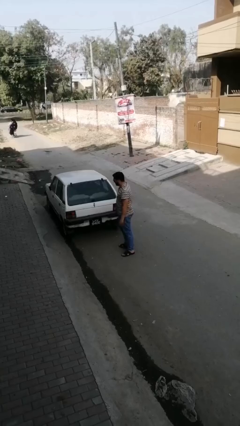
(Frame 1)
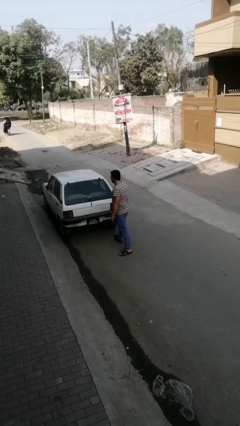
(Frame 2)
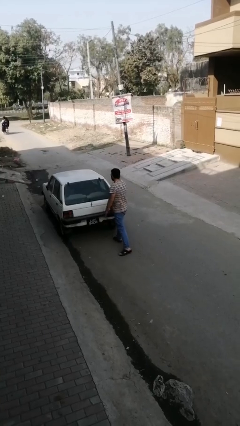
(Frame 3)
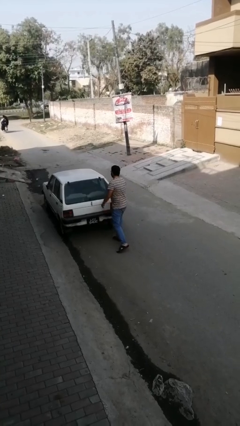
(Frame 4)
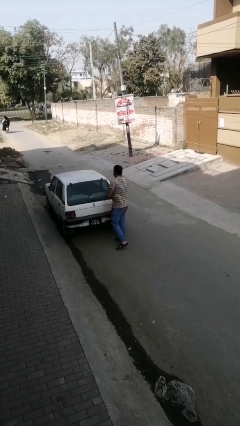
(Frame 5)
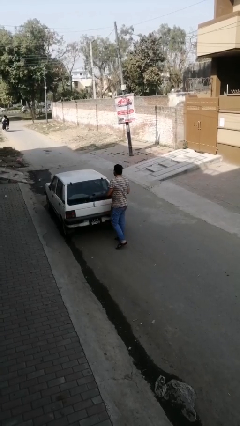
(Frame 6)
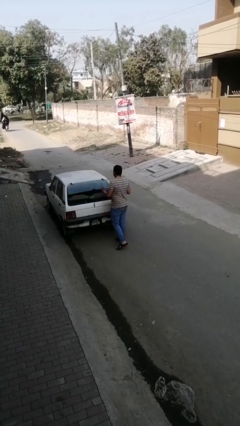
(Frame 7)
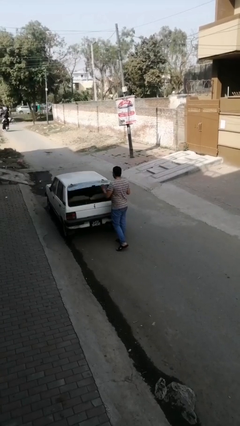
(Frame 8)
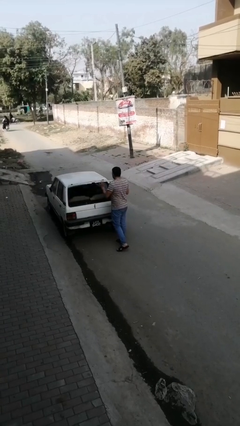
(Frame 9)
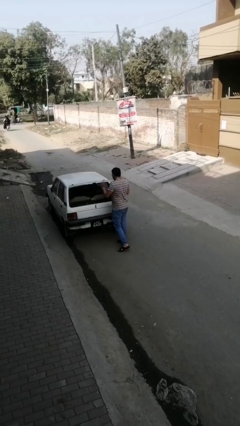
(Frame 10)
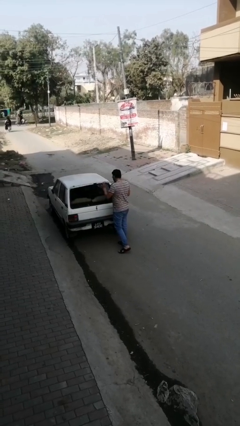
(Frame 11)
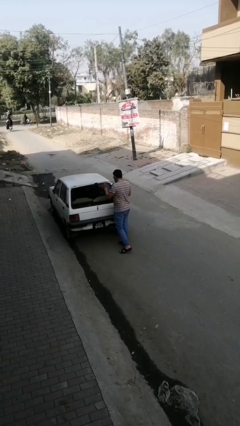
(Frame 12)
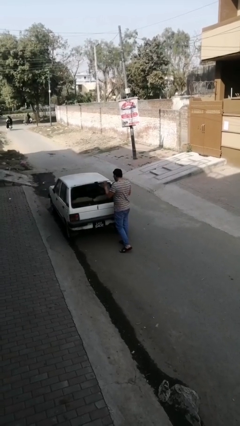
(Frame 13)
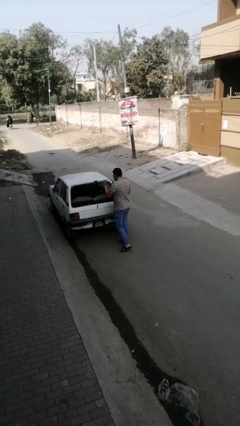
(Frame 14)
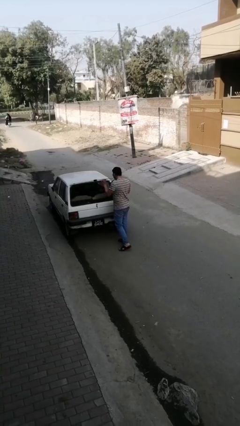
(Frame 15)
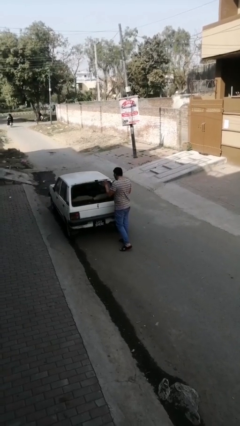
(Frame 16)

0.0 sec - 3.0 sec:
person opens car trunk

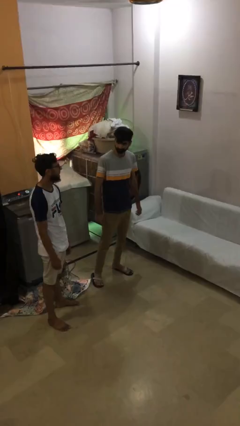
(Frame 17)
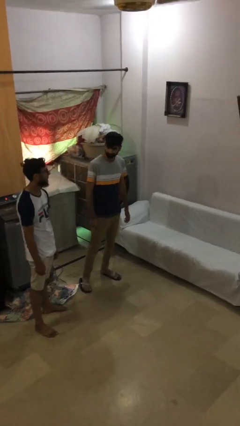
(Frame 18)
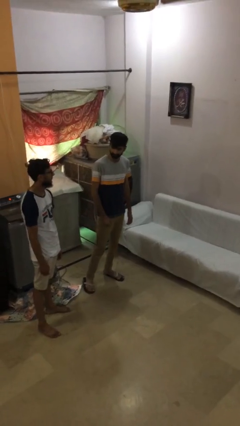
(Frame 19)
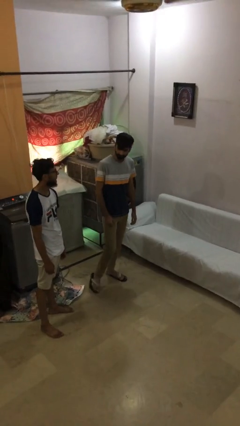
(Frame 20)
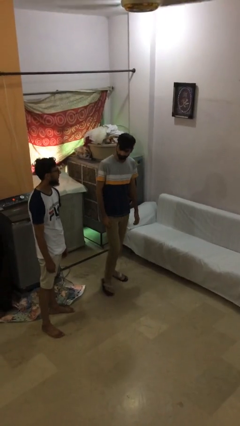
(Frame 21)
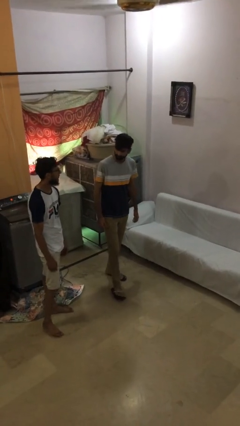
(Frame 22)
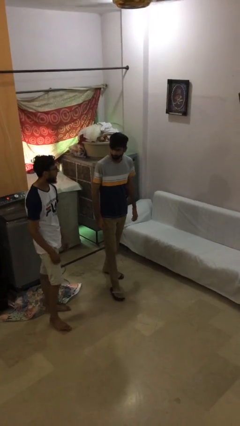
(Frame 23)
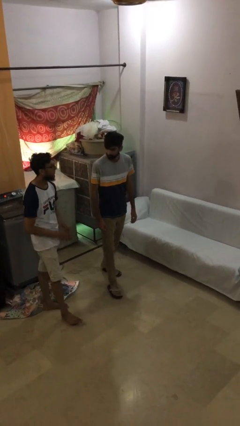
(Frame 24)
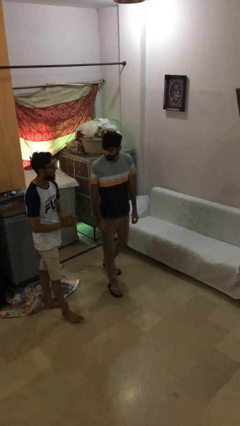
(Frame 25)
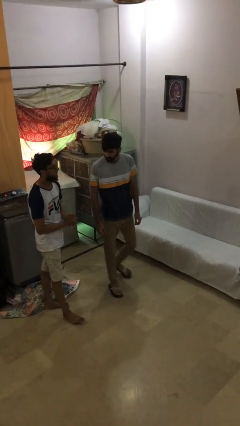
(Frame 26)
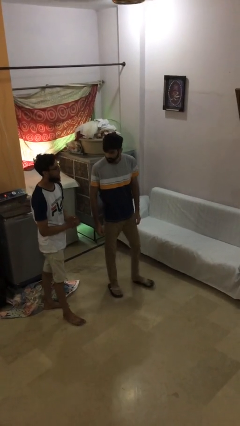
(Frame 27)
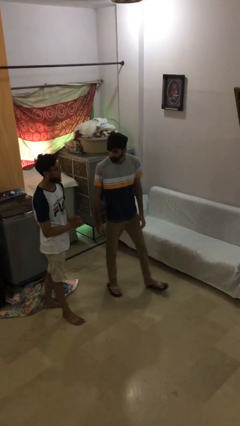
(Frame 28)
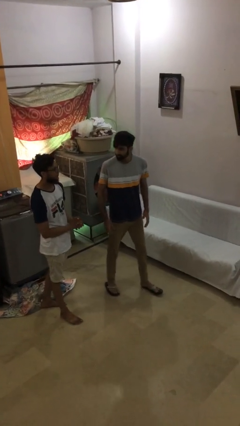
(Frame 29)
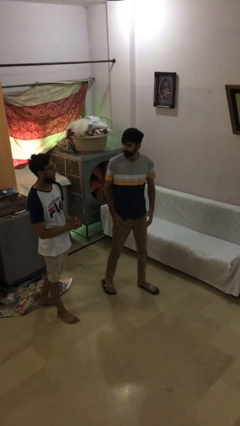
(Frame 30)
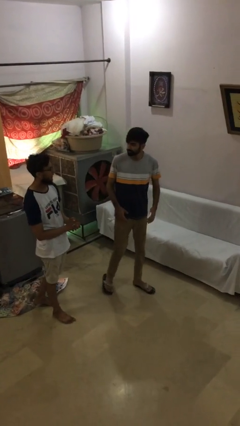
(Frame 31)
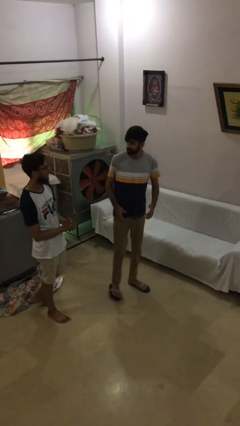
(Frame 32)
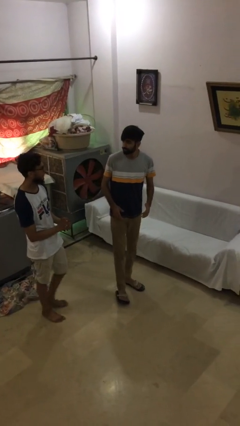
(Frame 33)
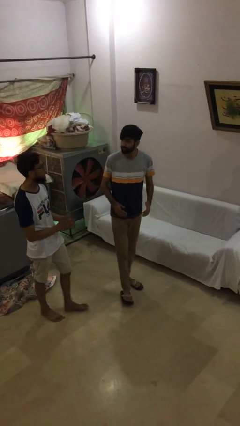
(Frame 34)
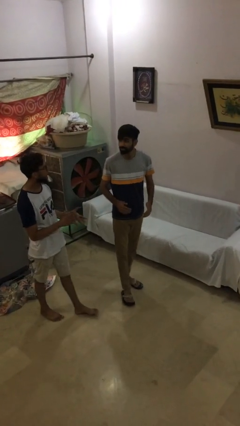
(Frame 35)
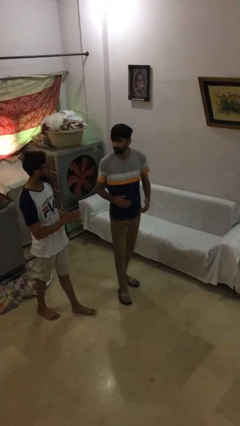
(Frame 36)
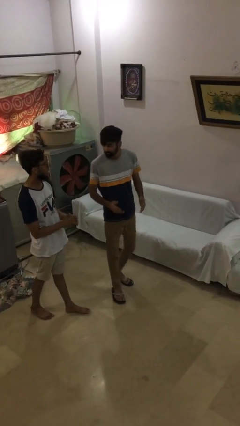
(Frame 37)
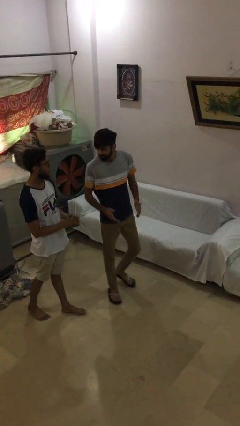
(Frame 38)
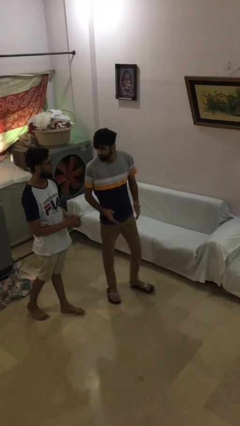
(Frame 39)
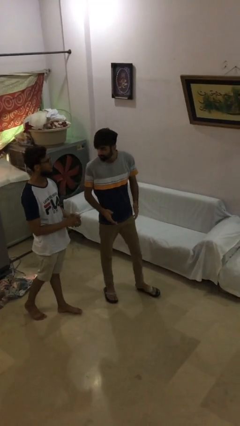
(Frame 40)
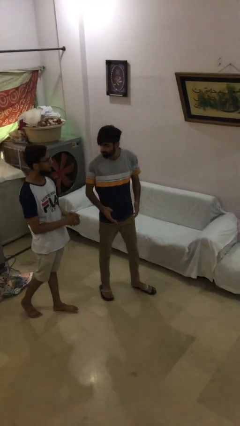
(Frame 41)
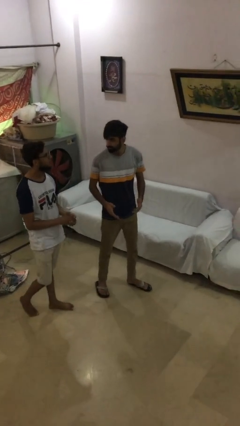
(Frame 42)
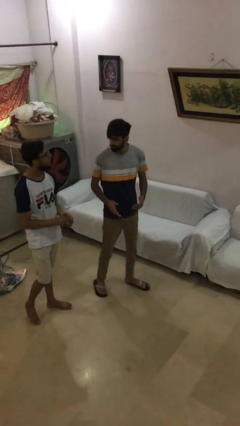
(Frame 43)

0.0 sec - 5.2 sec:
person talks to person

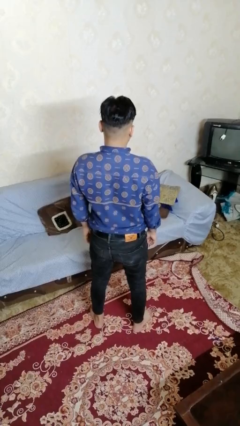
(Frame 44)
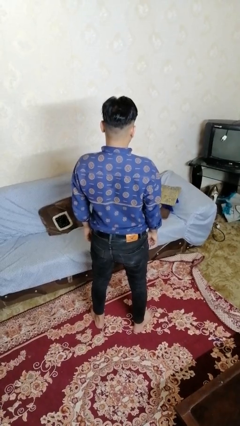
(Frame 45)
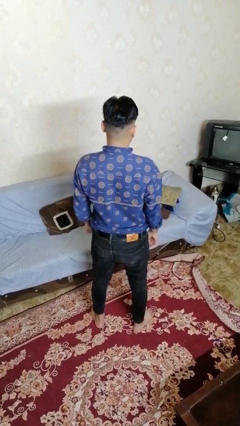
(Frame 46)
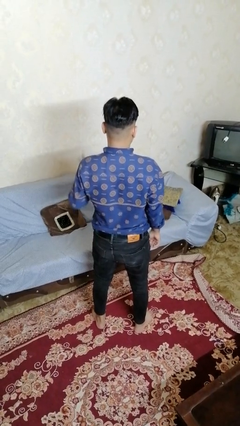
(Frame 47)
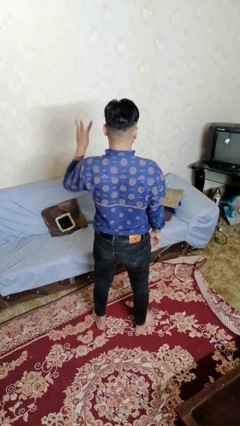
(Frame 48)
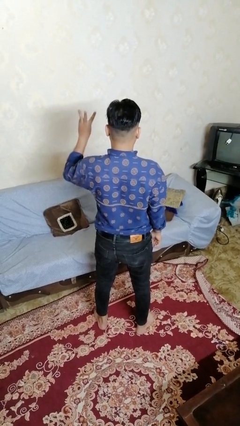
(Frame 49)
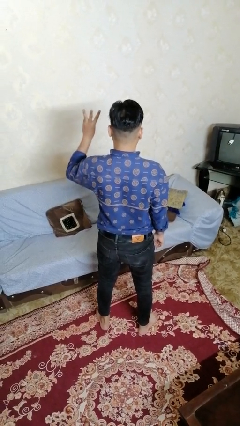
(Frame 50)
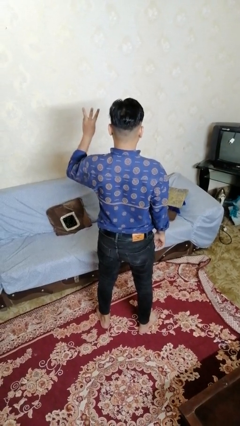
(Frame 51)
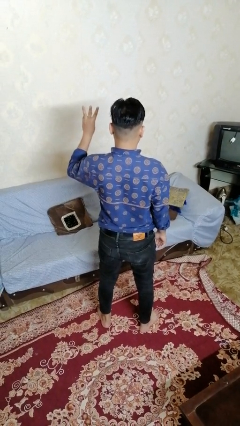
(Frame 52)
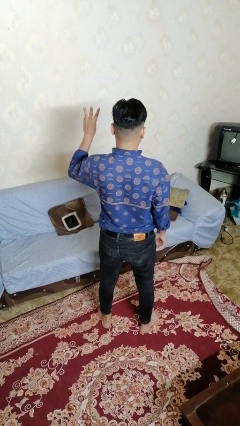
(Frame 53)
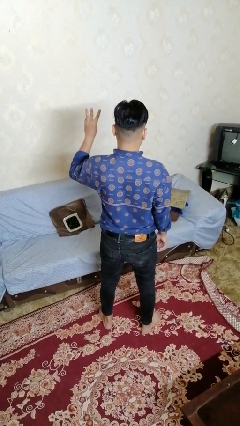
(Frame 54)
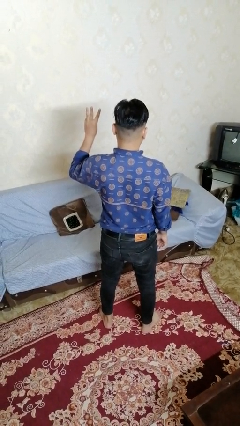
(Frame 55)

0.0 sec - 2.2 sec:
person gestures number three

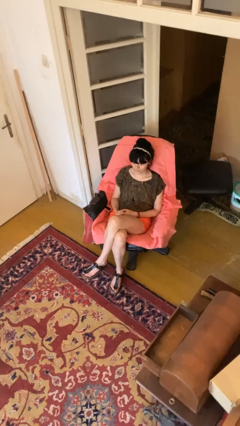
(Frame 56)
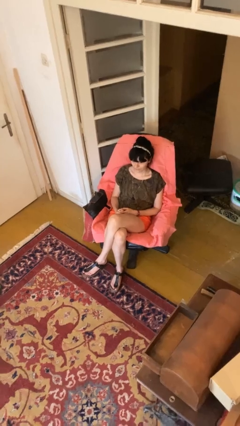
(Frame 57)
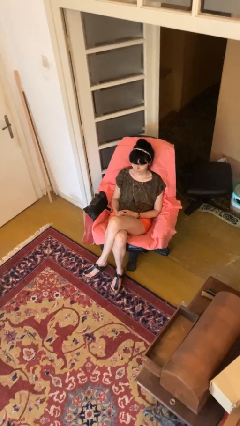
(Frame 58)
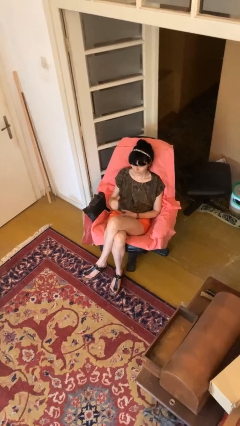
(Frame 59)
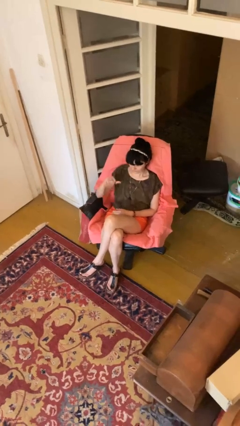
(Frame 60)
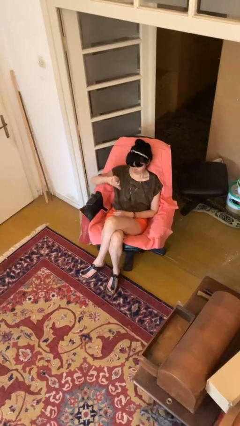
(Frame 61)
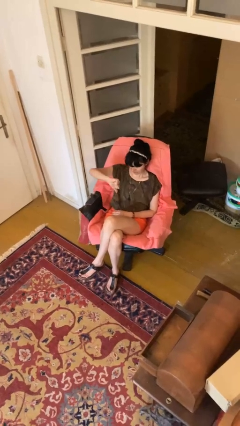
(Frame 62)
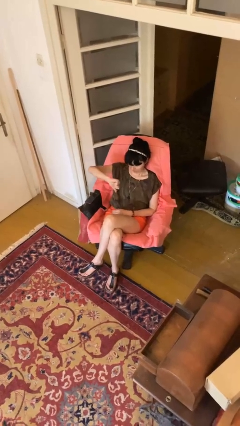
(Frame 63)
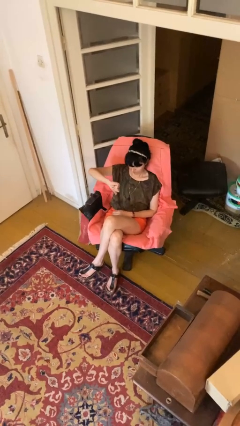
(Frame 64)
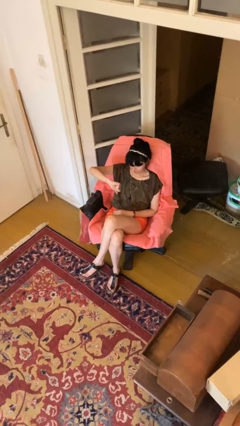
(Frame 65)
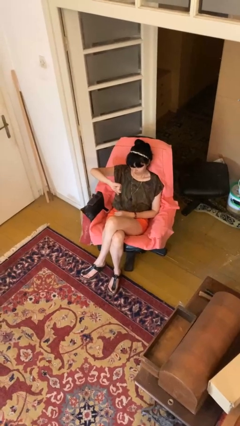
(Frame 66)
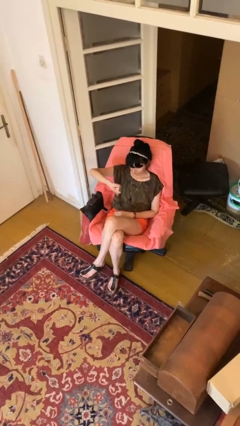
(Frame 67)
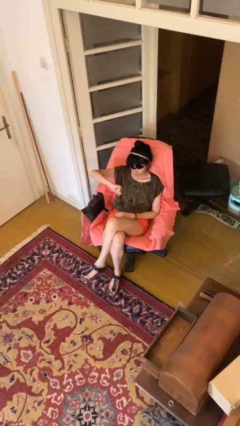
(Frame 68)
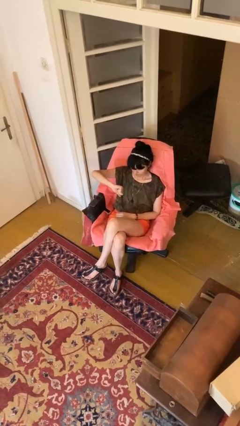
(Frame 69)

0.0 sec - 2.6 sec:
person gestures thumbs down

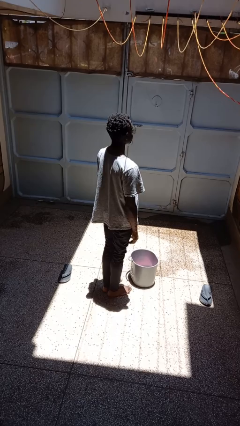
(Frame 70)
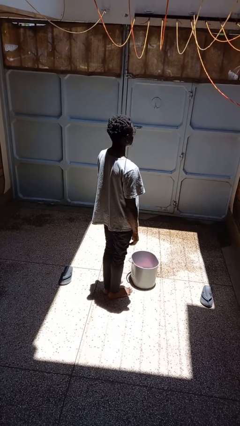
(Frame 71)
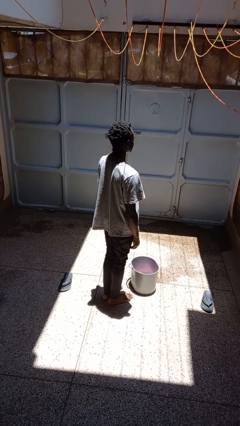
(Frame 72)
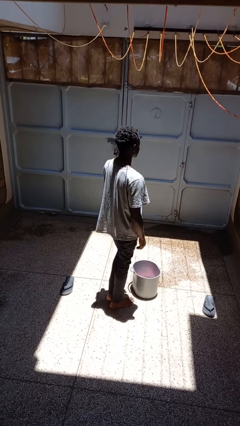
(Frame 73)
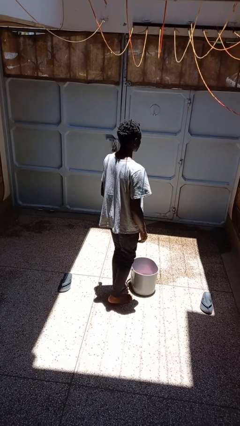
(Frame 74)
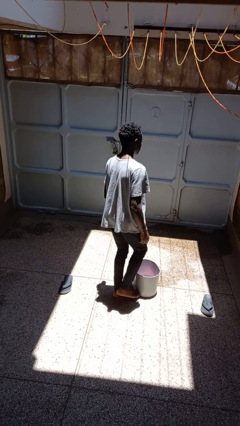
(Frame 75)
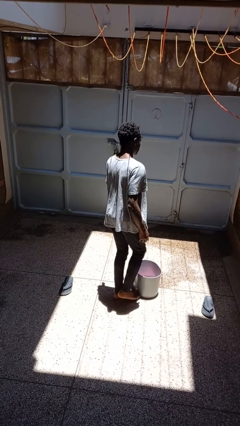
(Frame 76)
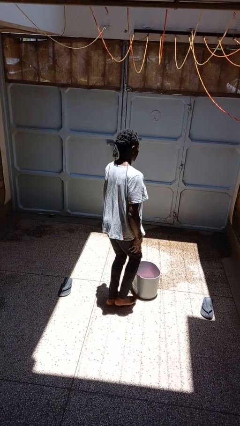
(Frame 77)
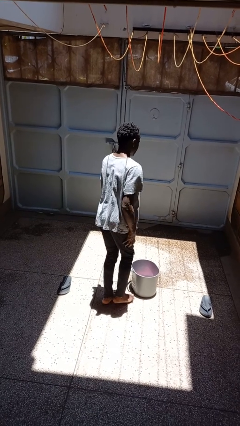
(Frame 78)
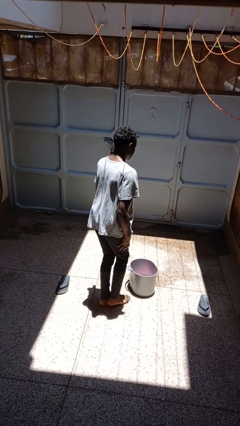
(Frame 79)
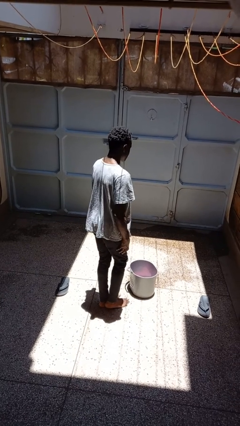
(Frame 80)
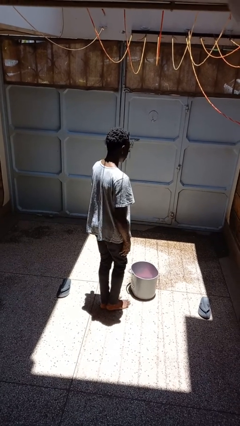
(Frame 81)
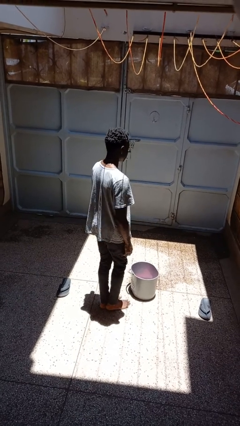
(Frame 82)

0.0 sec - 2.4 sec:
person stubs toe

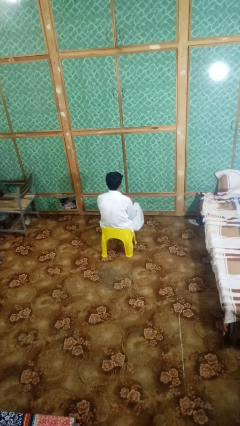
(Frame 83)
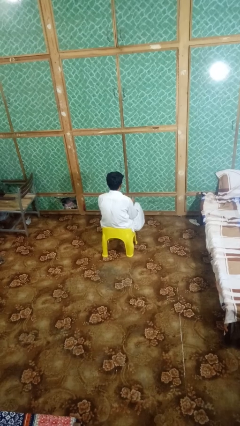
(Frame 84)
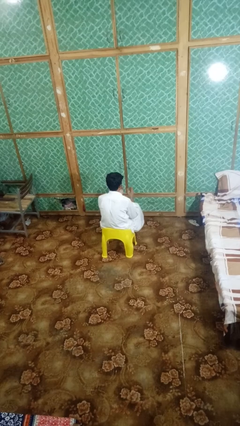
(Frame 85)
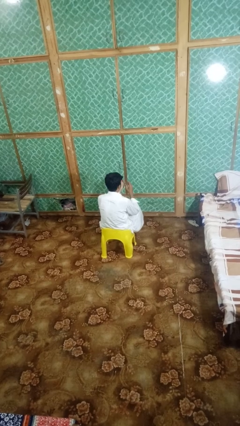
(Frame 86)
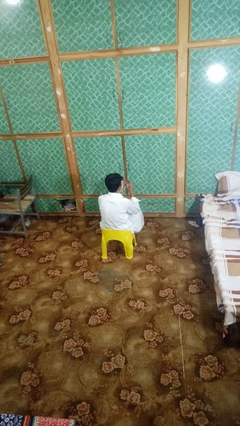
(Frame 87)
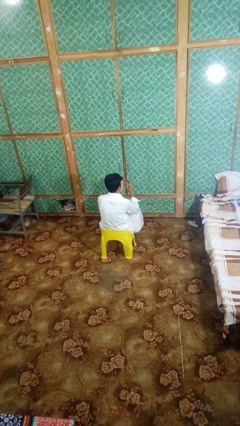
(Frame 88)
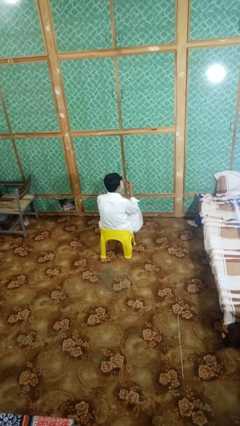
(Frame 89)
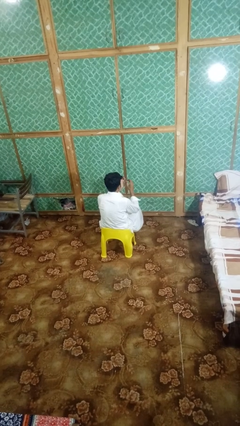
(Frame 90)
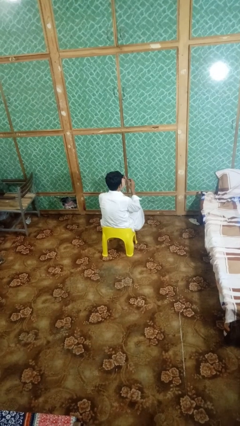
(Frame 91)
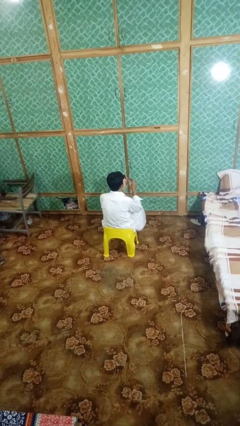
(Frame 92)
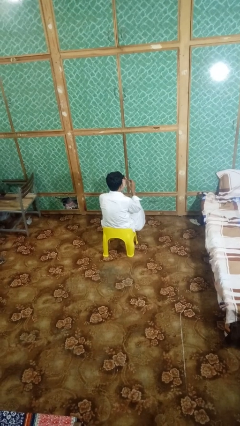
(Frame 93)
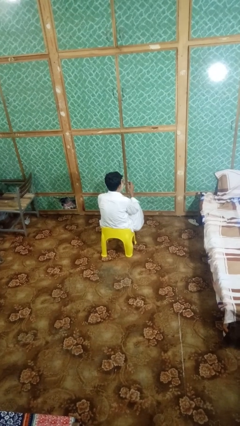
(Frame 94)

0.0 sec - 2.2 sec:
person clips fingernails
